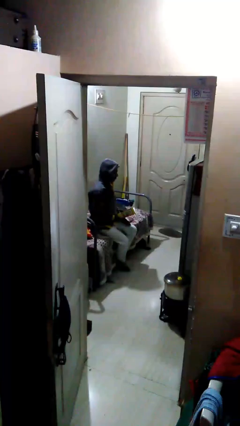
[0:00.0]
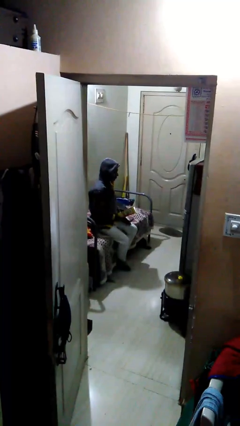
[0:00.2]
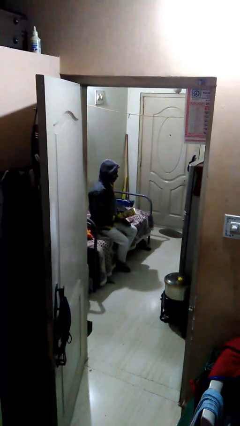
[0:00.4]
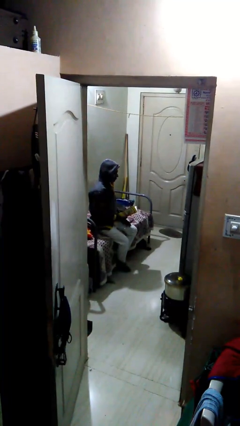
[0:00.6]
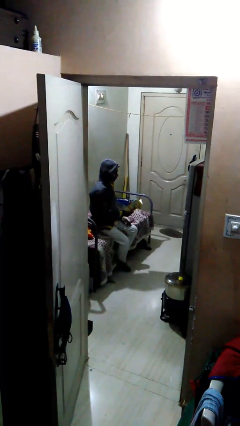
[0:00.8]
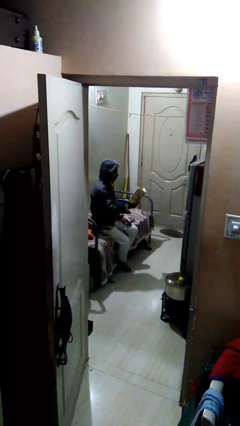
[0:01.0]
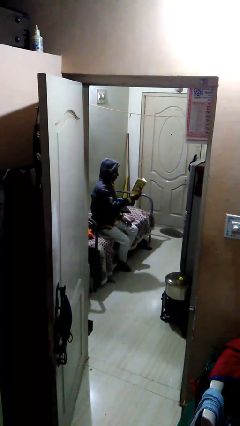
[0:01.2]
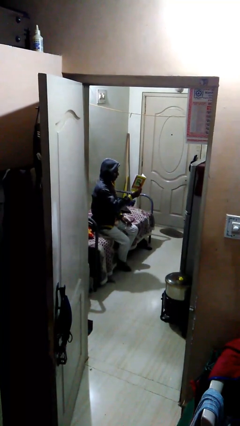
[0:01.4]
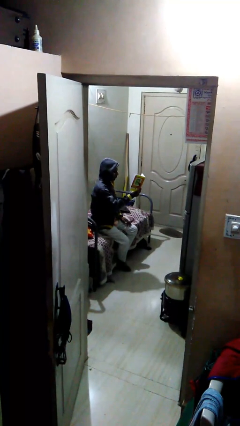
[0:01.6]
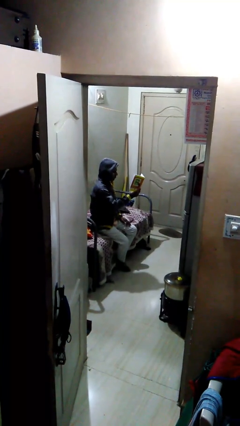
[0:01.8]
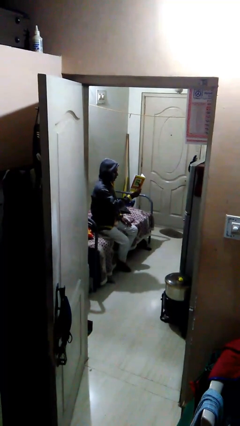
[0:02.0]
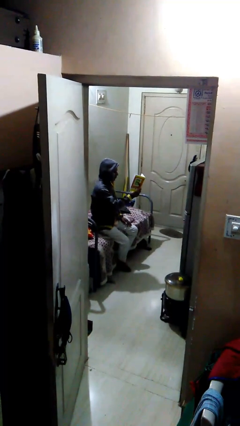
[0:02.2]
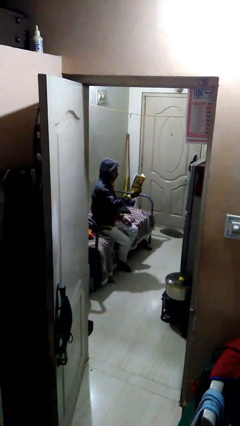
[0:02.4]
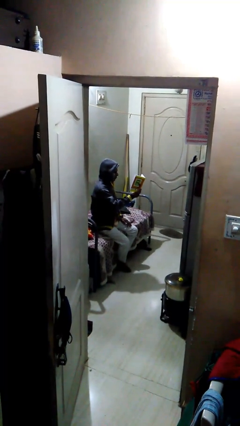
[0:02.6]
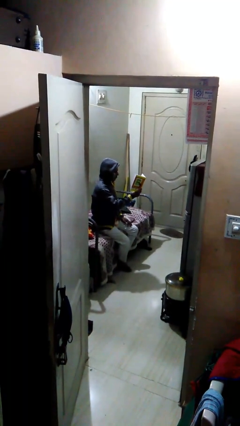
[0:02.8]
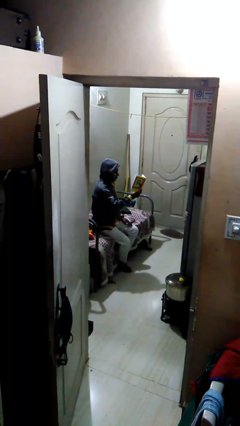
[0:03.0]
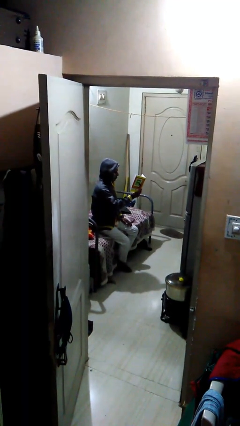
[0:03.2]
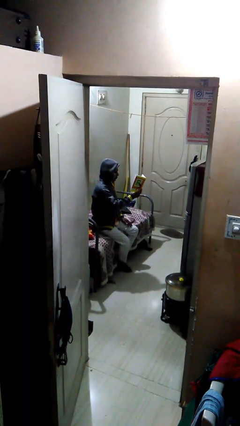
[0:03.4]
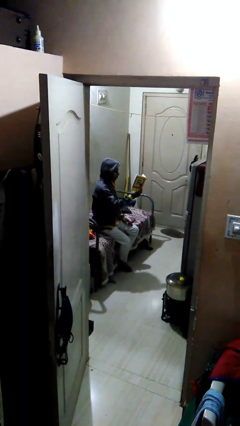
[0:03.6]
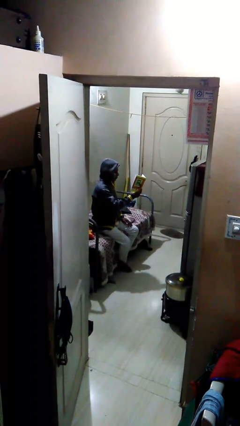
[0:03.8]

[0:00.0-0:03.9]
person reads document

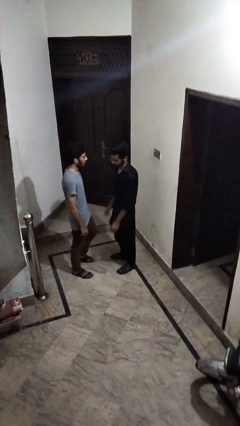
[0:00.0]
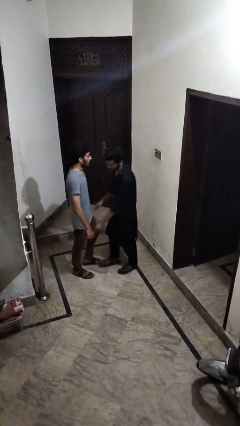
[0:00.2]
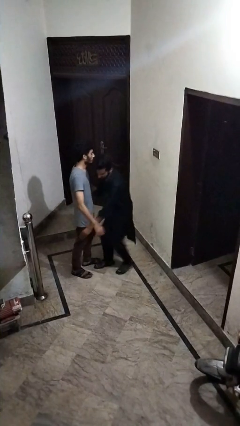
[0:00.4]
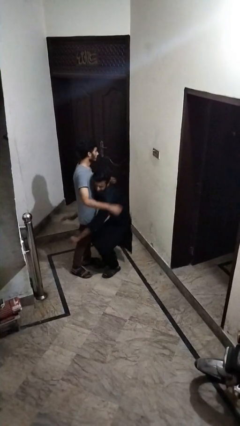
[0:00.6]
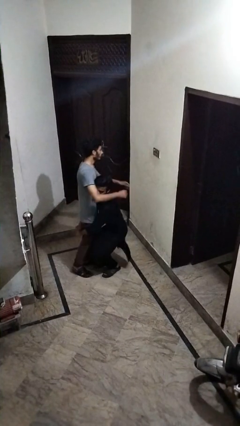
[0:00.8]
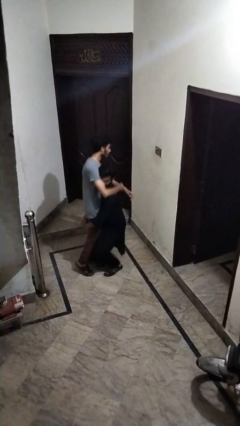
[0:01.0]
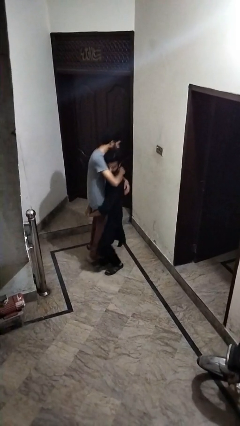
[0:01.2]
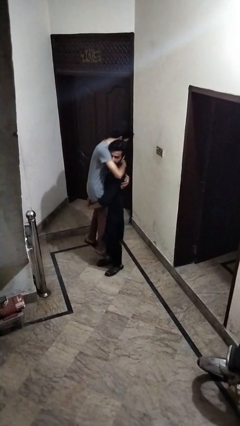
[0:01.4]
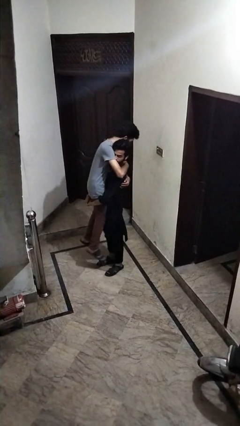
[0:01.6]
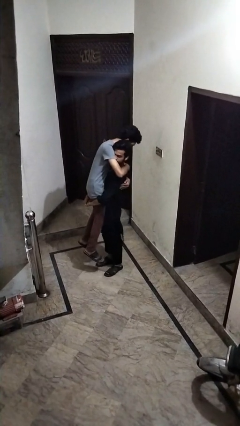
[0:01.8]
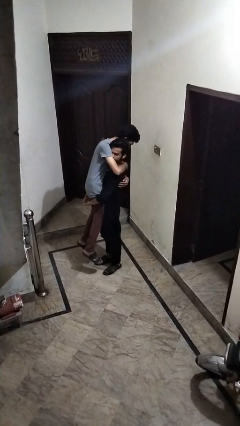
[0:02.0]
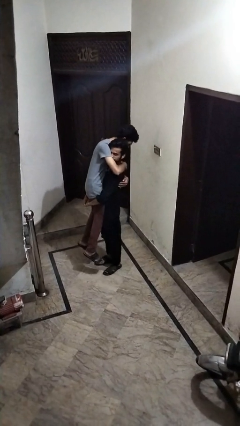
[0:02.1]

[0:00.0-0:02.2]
person picks up person

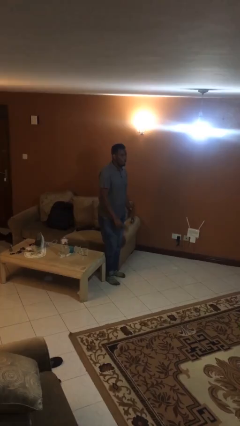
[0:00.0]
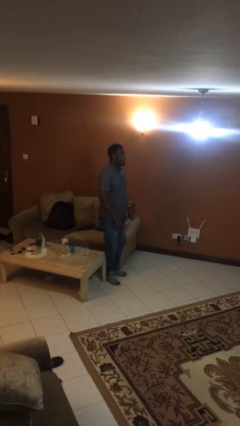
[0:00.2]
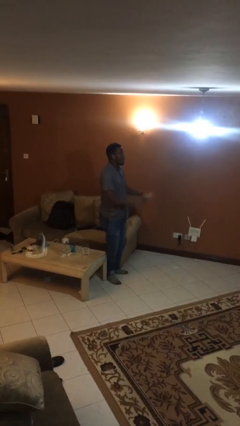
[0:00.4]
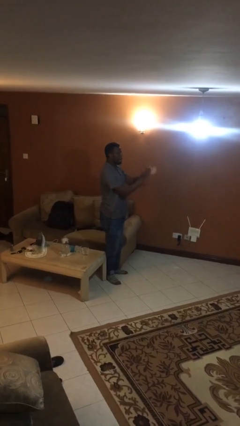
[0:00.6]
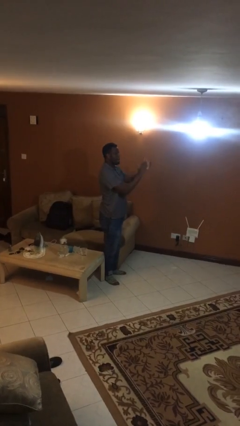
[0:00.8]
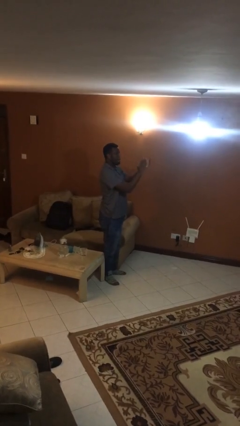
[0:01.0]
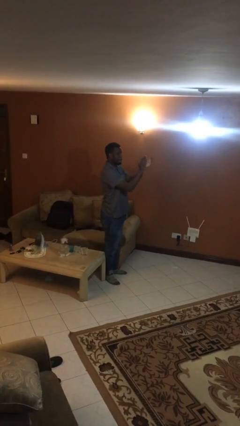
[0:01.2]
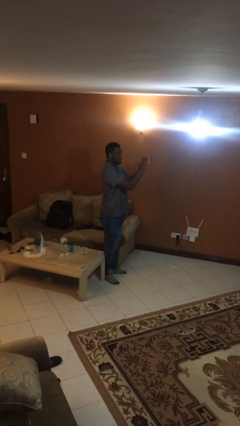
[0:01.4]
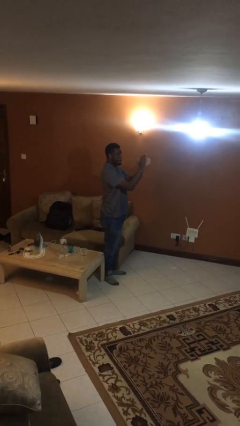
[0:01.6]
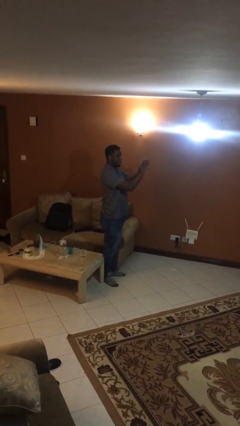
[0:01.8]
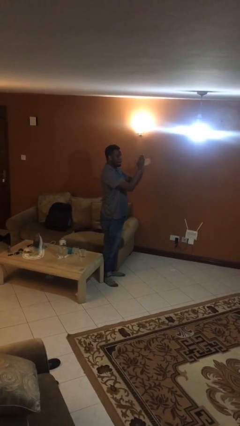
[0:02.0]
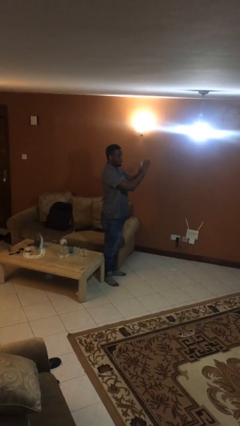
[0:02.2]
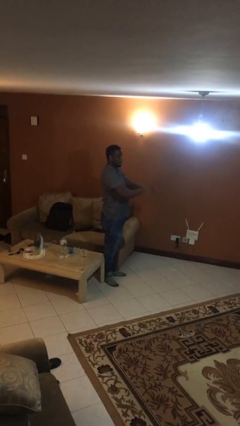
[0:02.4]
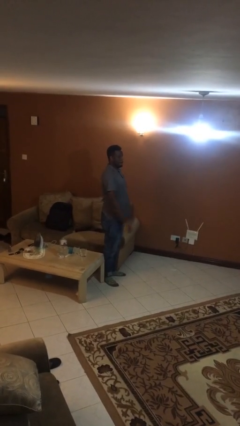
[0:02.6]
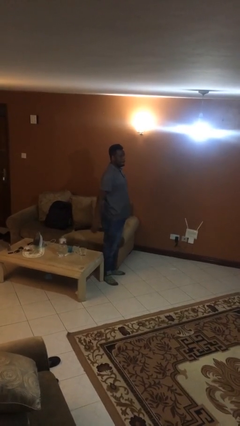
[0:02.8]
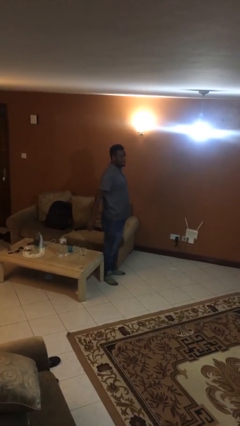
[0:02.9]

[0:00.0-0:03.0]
person claps hands

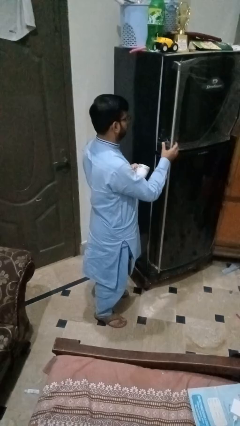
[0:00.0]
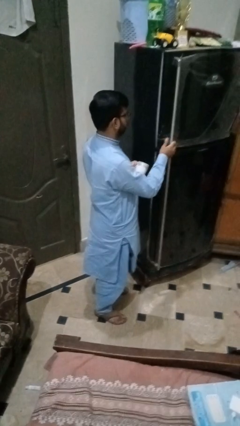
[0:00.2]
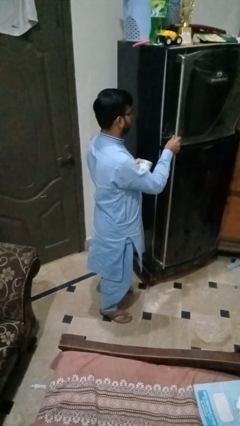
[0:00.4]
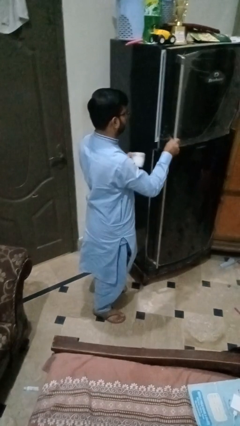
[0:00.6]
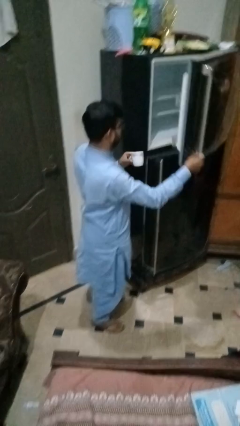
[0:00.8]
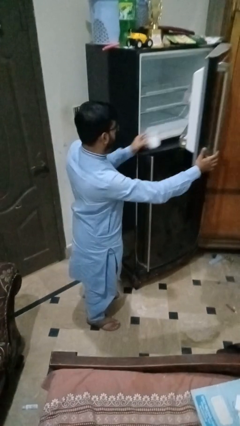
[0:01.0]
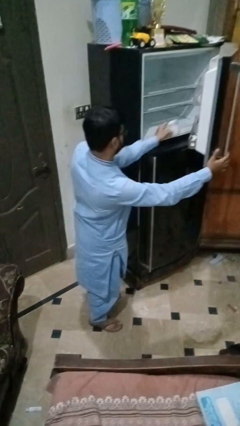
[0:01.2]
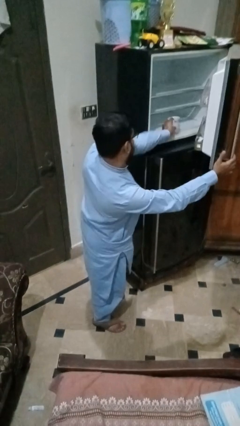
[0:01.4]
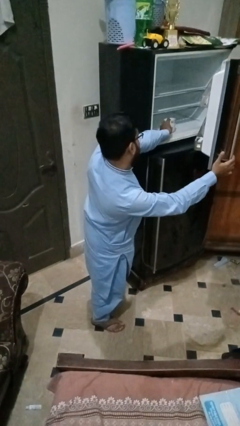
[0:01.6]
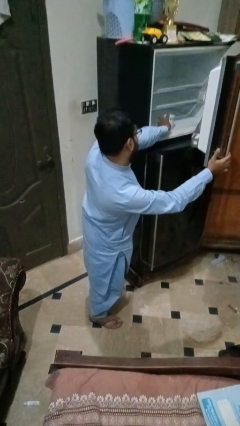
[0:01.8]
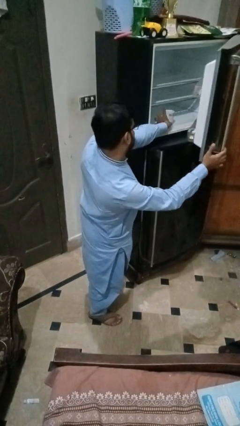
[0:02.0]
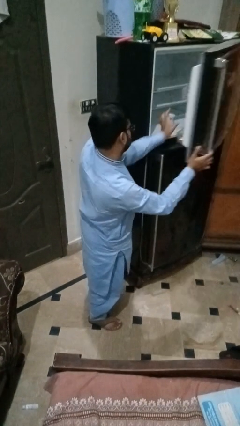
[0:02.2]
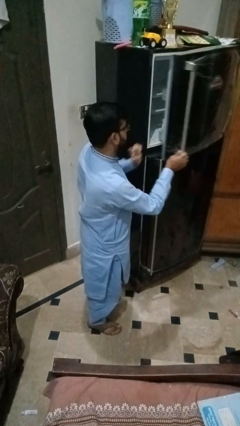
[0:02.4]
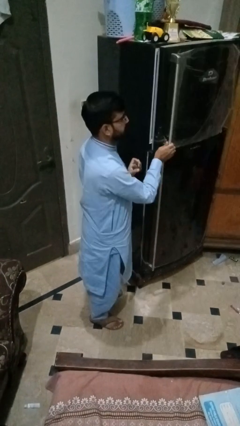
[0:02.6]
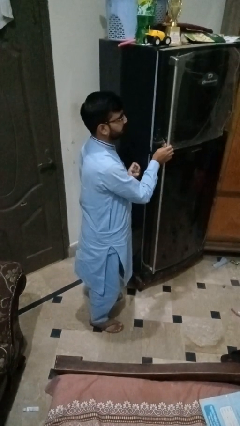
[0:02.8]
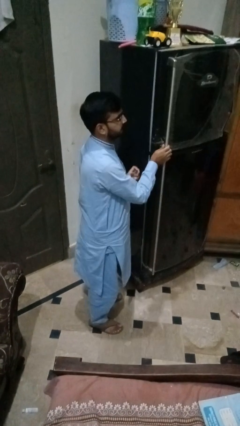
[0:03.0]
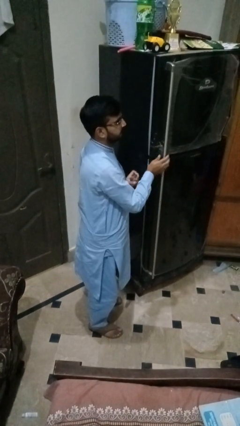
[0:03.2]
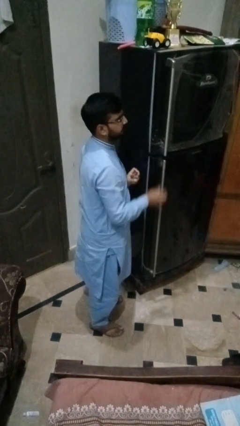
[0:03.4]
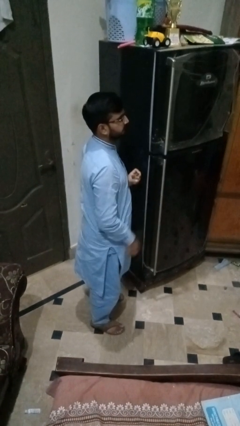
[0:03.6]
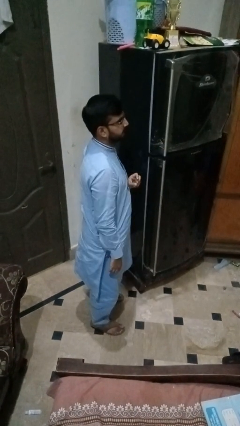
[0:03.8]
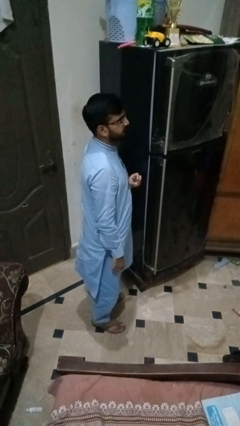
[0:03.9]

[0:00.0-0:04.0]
person puts object into refrigerator

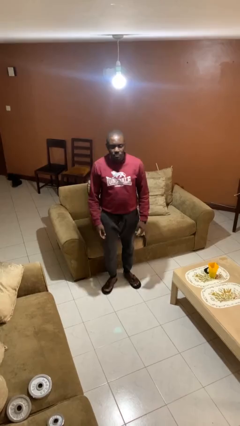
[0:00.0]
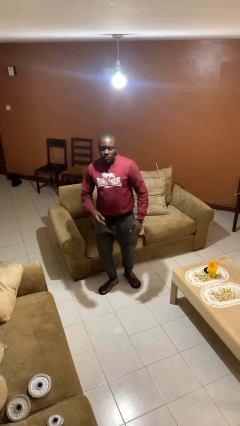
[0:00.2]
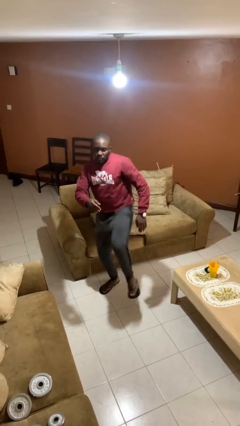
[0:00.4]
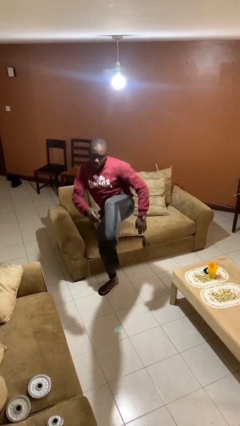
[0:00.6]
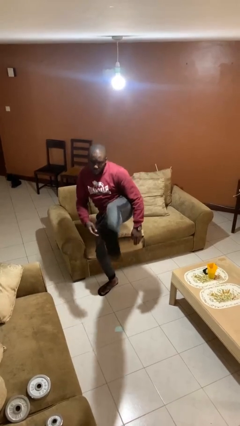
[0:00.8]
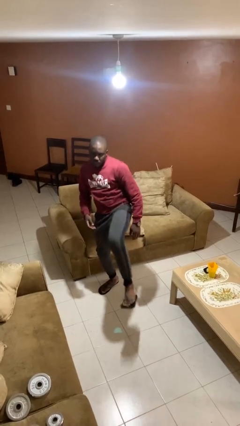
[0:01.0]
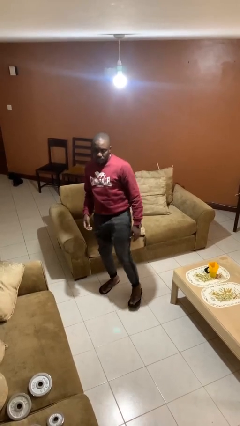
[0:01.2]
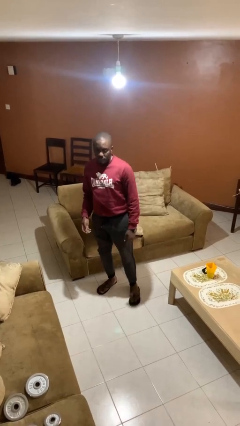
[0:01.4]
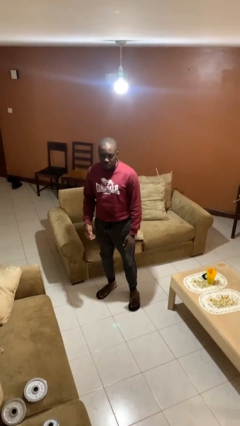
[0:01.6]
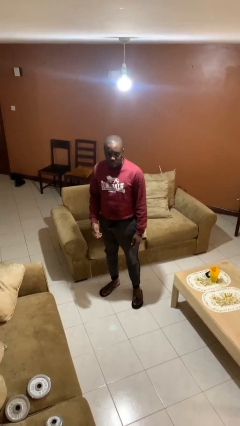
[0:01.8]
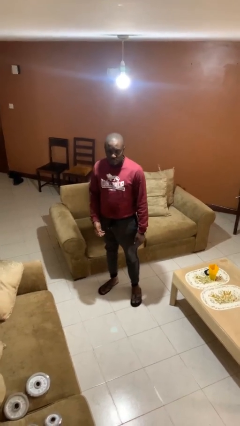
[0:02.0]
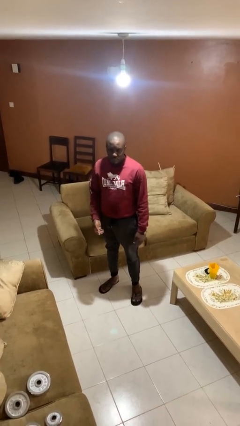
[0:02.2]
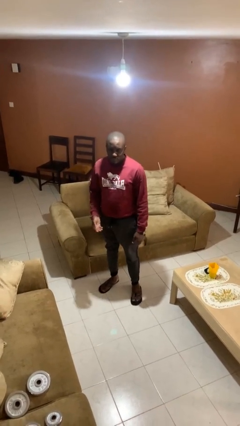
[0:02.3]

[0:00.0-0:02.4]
person karate kicks

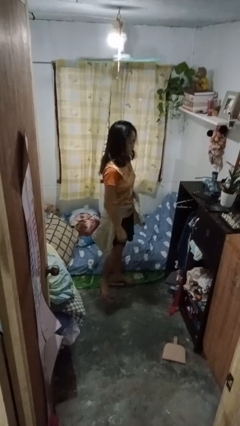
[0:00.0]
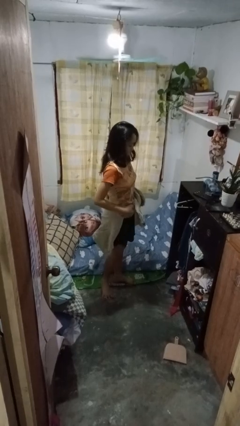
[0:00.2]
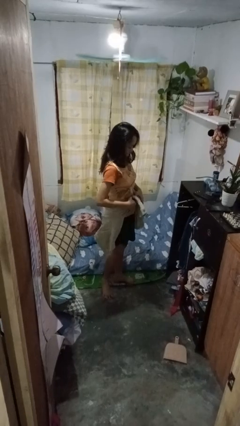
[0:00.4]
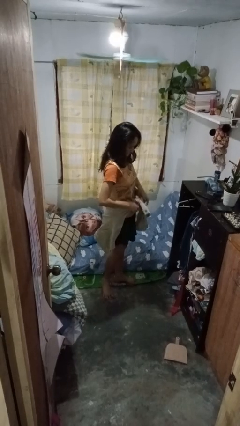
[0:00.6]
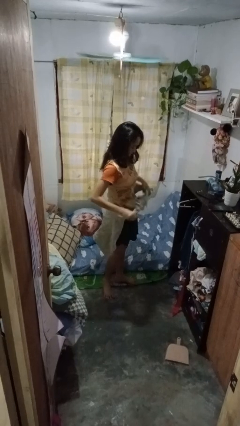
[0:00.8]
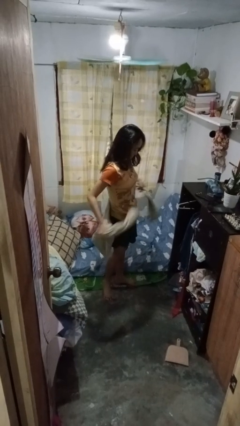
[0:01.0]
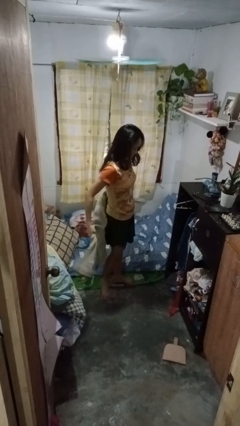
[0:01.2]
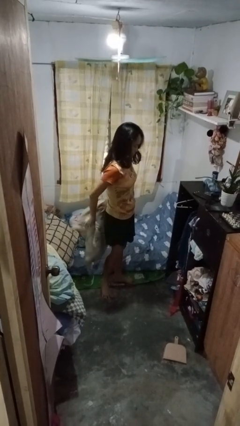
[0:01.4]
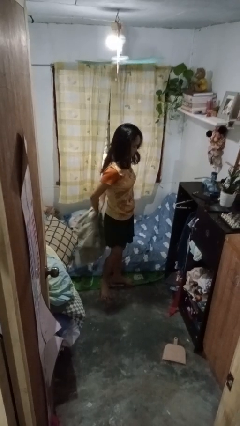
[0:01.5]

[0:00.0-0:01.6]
person unties jacket around waist
